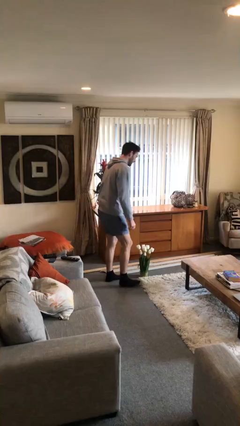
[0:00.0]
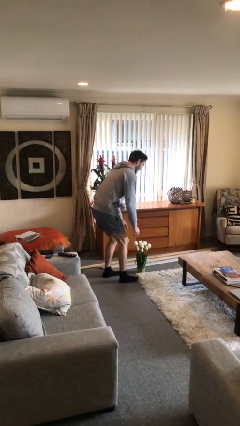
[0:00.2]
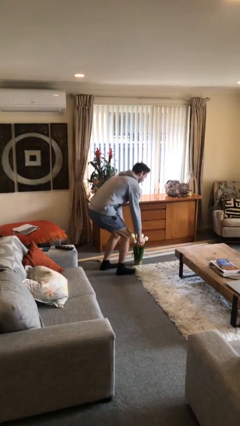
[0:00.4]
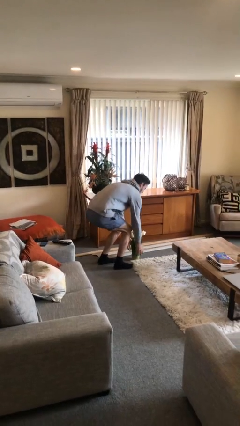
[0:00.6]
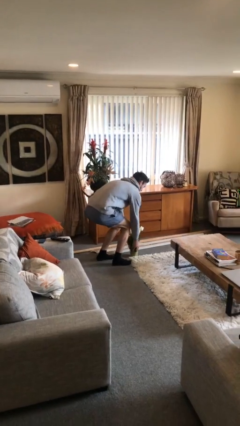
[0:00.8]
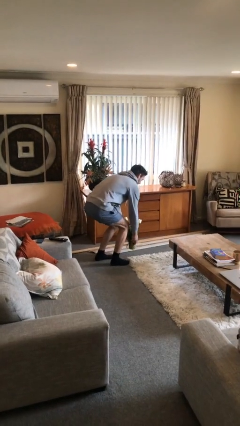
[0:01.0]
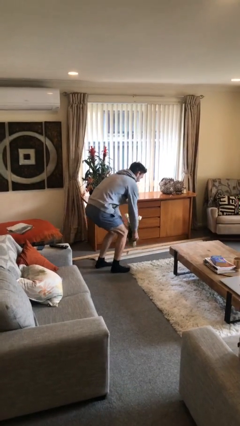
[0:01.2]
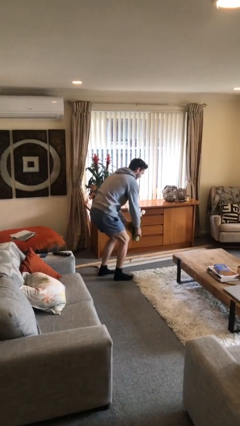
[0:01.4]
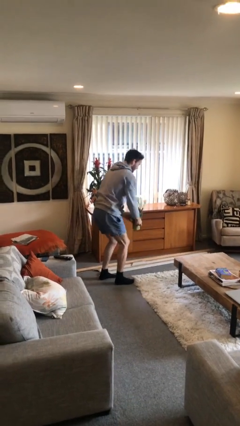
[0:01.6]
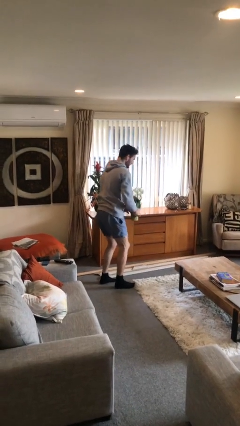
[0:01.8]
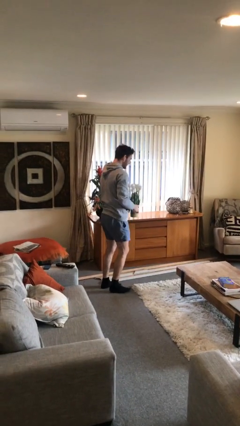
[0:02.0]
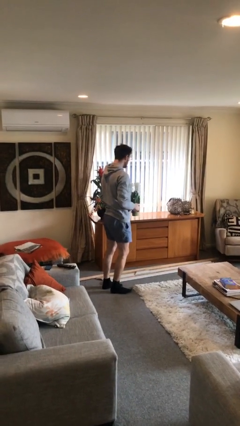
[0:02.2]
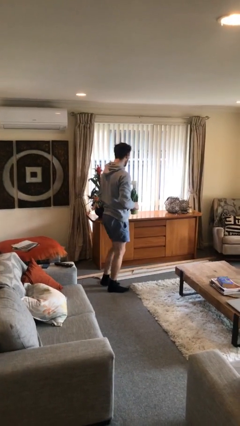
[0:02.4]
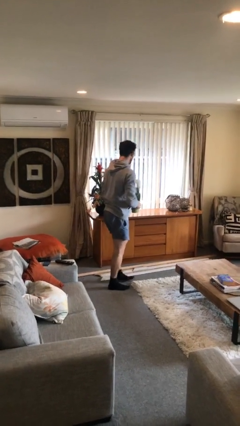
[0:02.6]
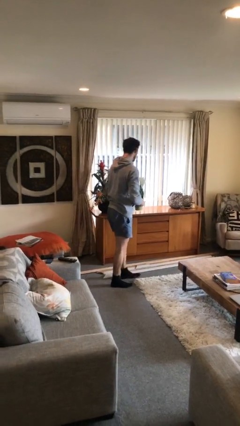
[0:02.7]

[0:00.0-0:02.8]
person picks up object from floor

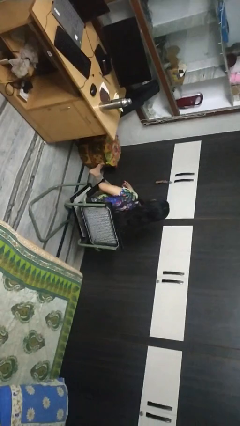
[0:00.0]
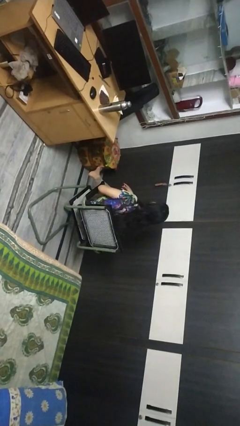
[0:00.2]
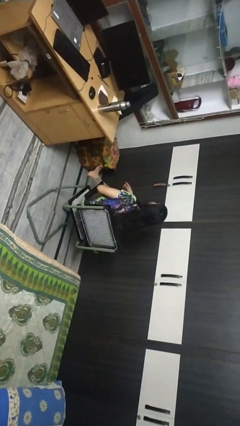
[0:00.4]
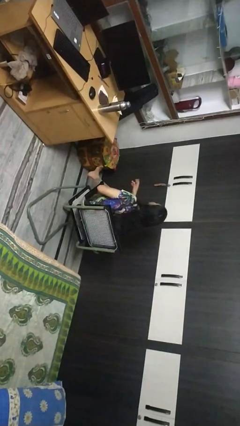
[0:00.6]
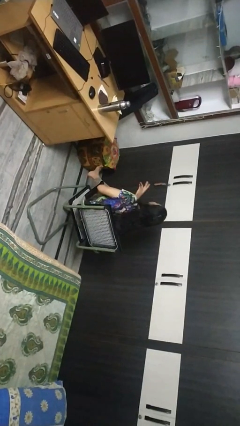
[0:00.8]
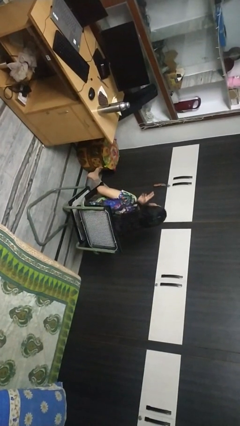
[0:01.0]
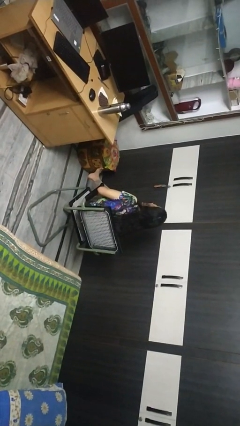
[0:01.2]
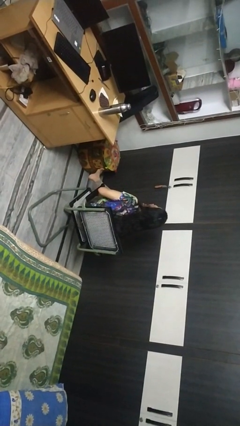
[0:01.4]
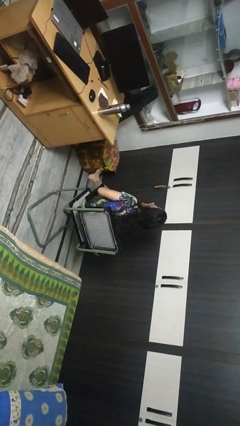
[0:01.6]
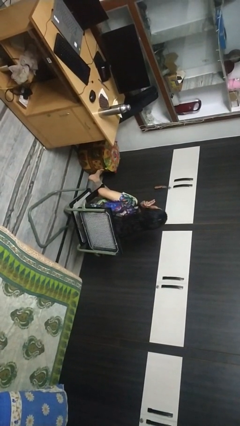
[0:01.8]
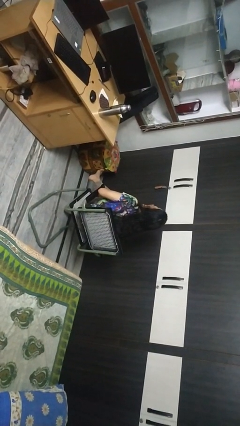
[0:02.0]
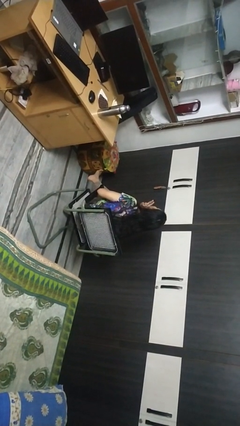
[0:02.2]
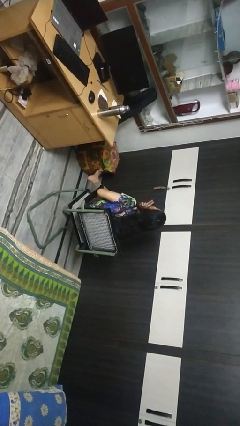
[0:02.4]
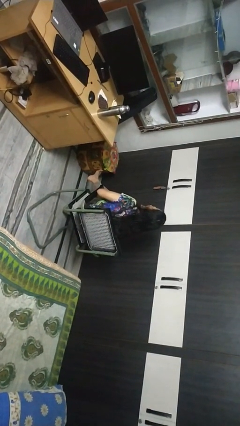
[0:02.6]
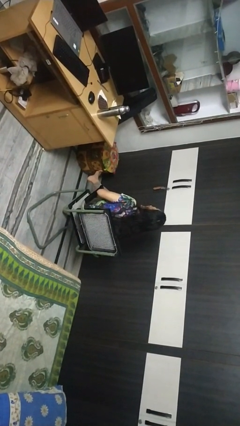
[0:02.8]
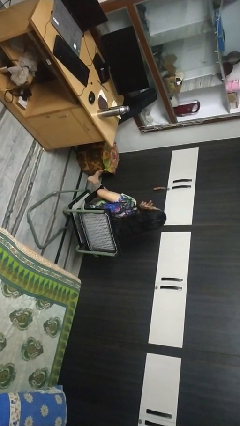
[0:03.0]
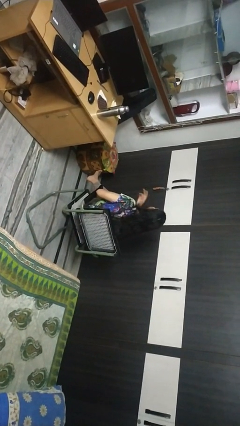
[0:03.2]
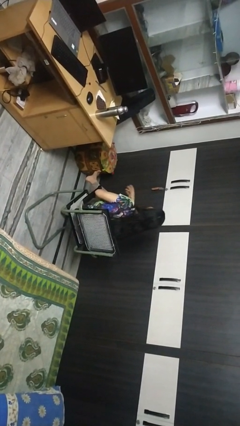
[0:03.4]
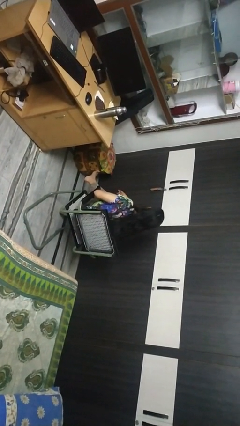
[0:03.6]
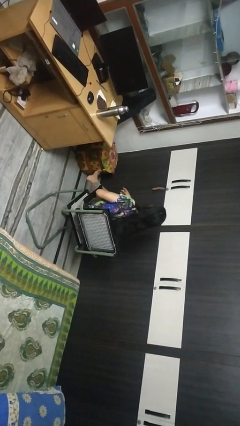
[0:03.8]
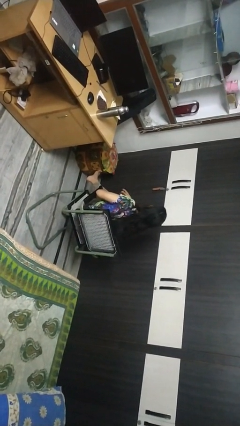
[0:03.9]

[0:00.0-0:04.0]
person strokes chin

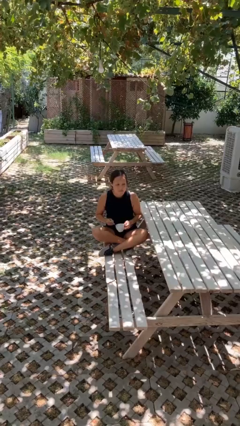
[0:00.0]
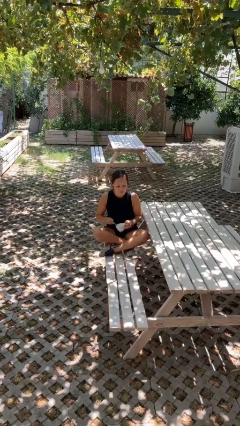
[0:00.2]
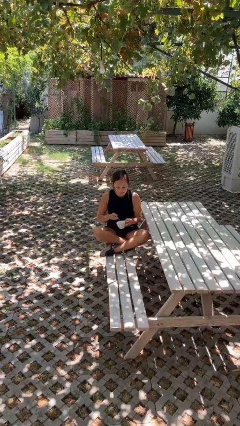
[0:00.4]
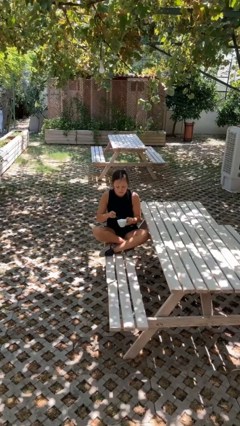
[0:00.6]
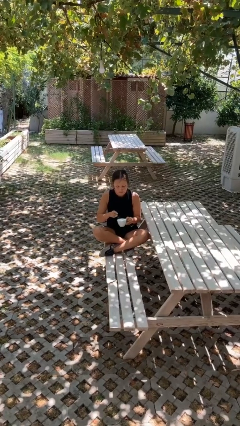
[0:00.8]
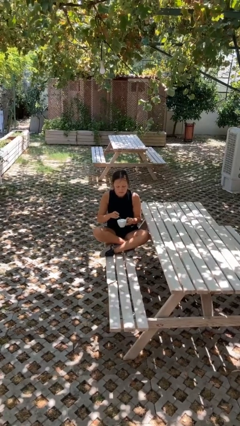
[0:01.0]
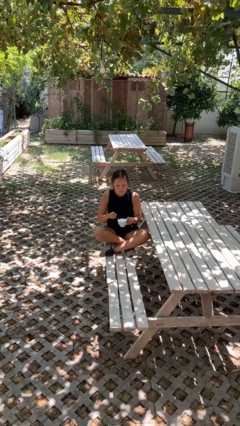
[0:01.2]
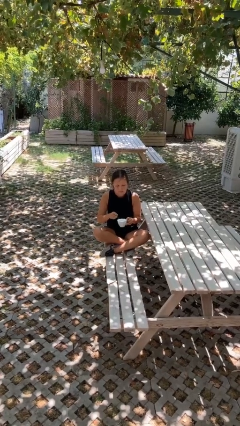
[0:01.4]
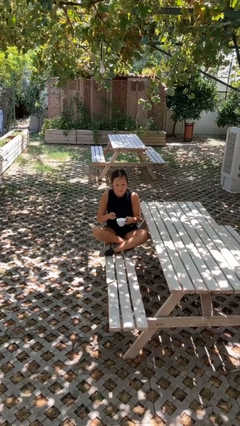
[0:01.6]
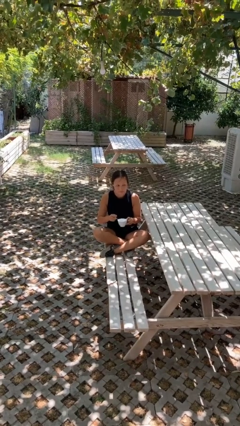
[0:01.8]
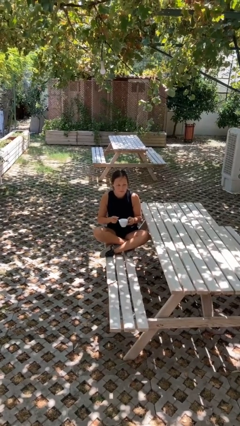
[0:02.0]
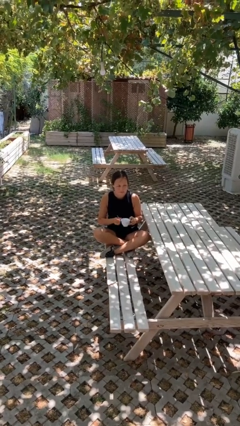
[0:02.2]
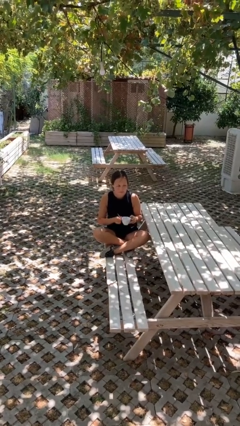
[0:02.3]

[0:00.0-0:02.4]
person stirs mug

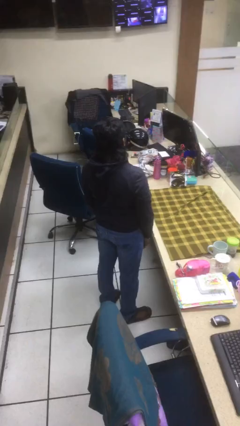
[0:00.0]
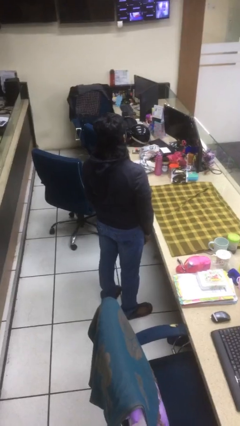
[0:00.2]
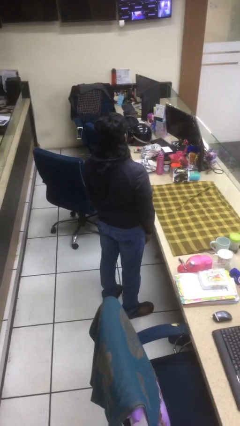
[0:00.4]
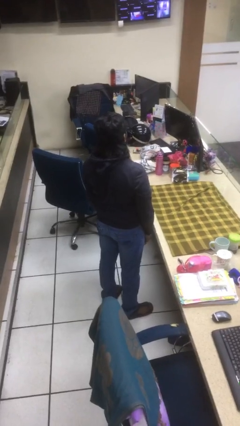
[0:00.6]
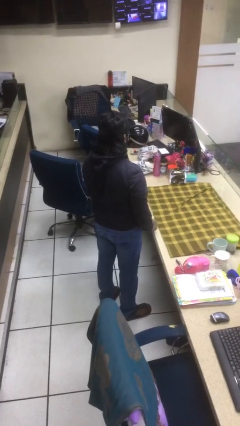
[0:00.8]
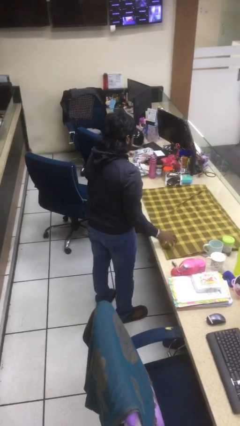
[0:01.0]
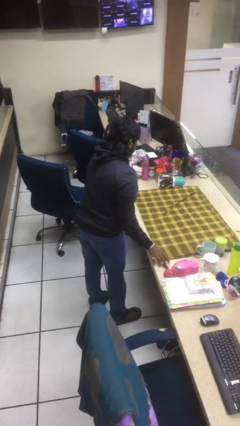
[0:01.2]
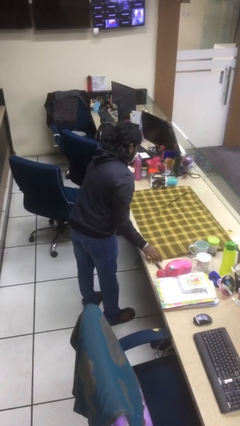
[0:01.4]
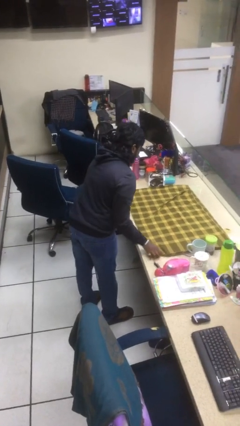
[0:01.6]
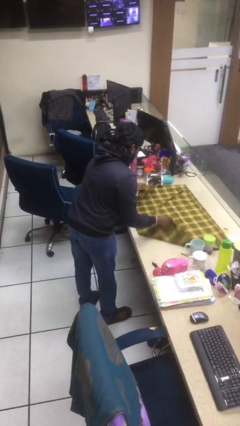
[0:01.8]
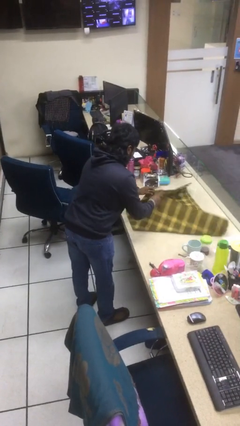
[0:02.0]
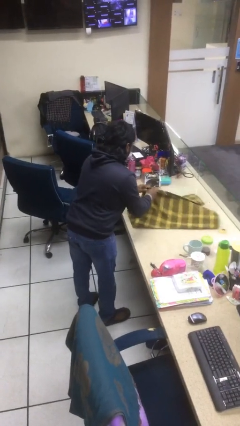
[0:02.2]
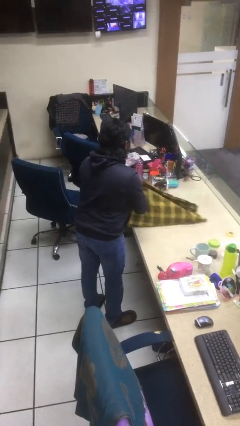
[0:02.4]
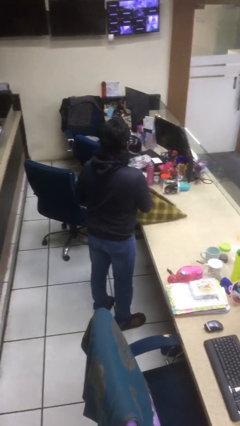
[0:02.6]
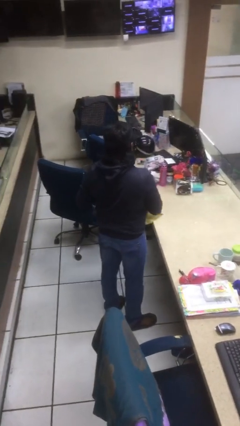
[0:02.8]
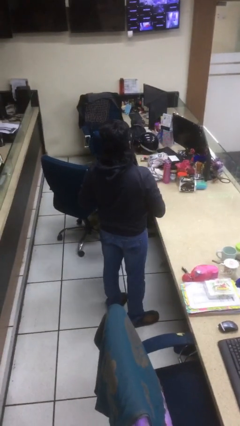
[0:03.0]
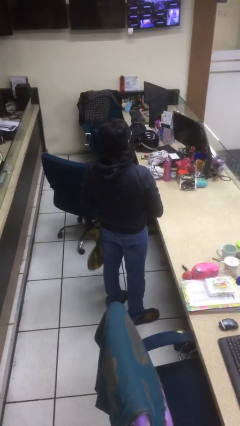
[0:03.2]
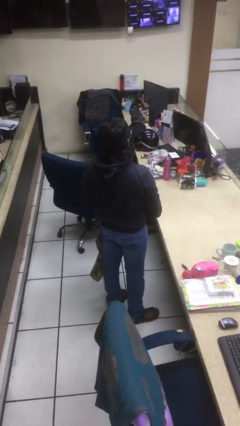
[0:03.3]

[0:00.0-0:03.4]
person folds tablecloth

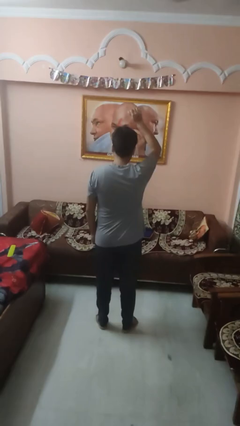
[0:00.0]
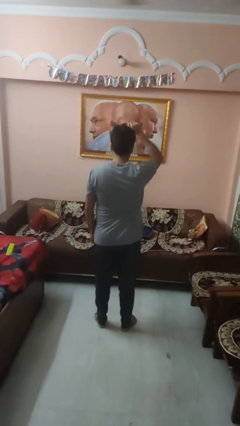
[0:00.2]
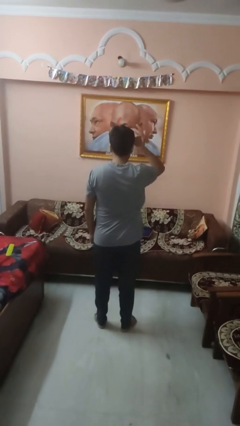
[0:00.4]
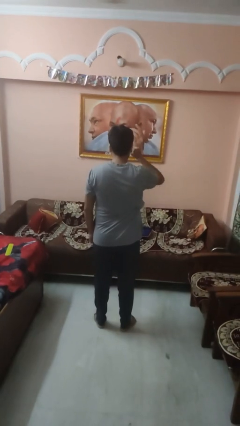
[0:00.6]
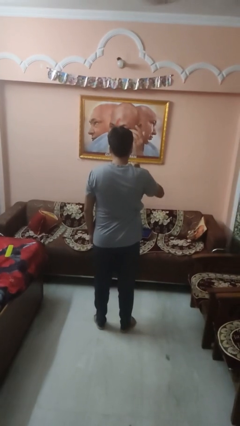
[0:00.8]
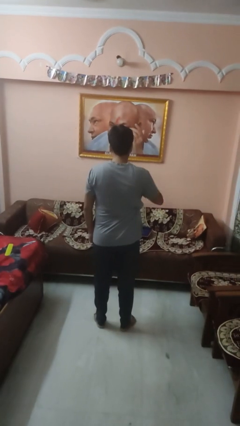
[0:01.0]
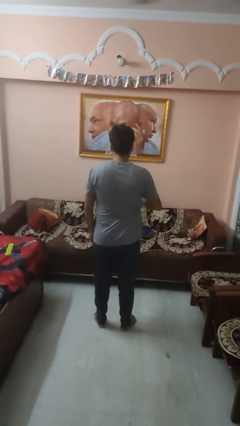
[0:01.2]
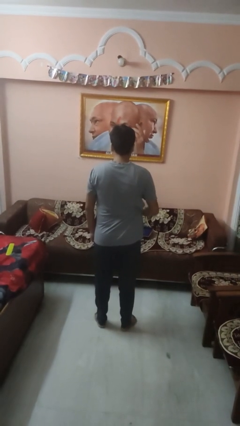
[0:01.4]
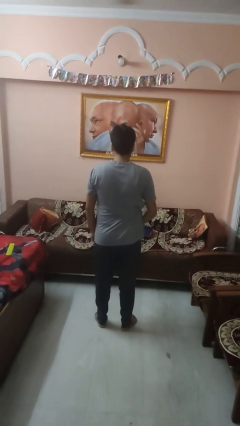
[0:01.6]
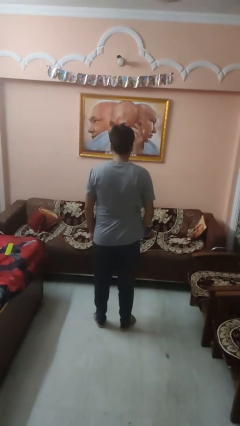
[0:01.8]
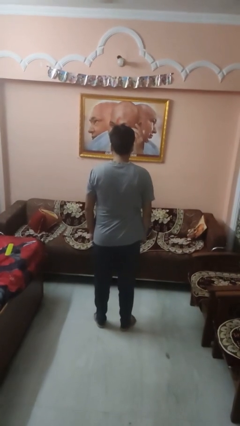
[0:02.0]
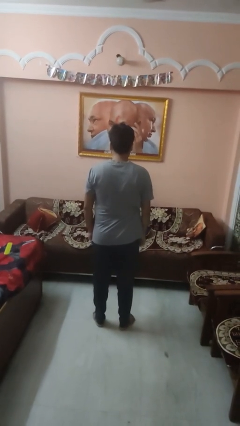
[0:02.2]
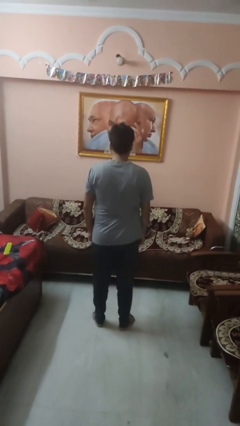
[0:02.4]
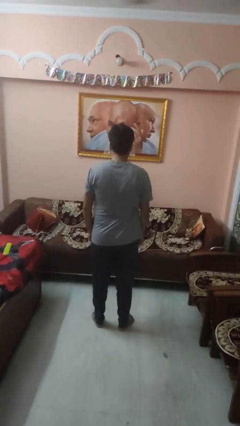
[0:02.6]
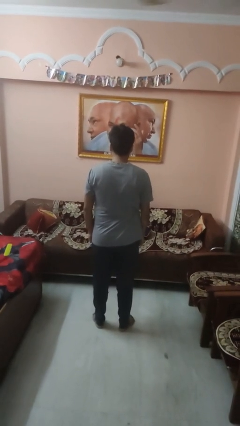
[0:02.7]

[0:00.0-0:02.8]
person gestures lower hand

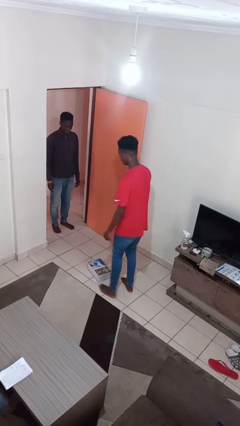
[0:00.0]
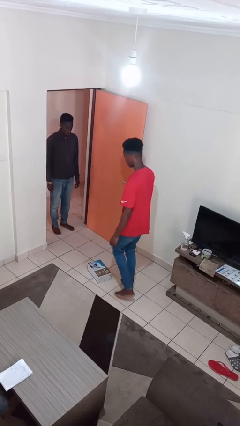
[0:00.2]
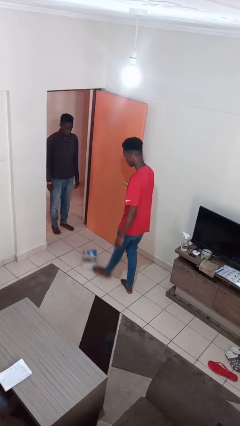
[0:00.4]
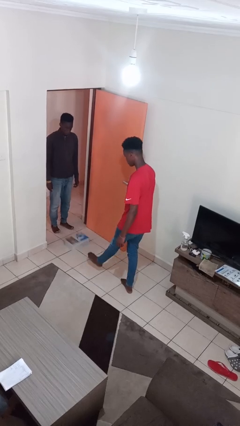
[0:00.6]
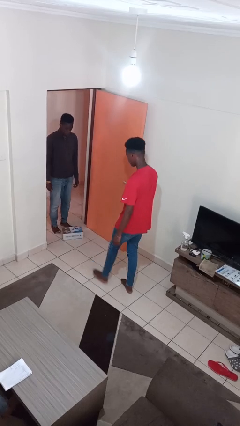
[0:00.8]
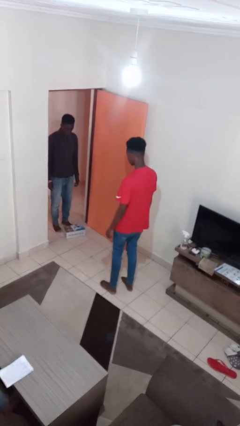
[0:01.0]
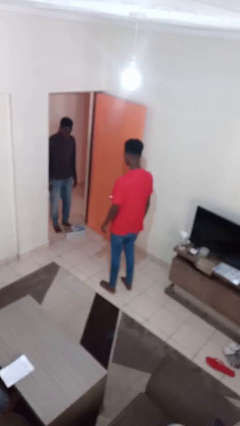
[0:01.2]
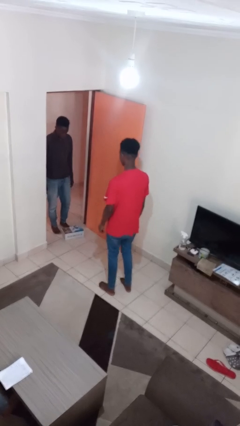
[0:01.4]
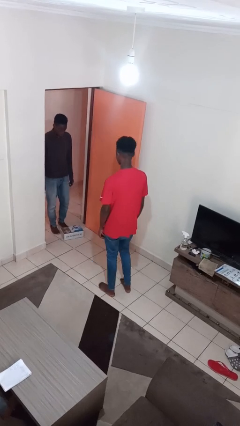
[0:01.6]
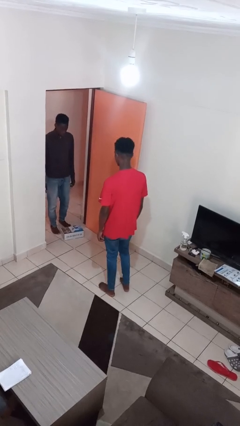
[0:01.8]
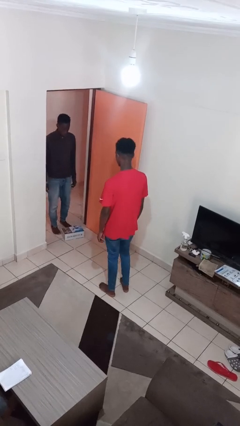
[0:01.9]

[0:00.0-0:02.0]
person kicks object to person
